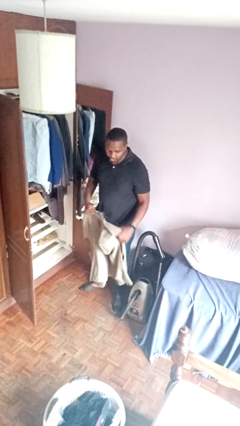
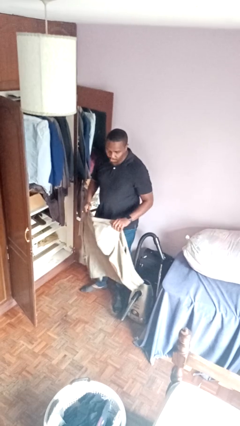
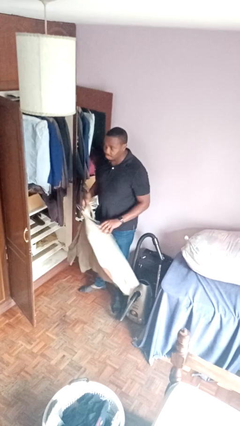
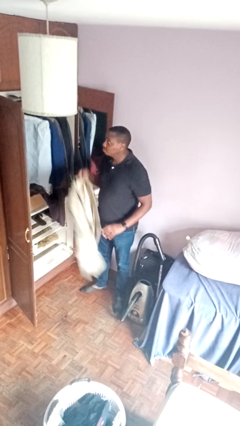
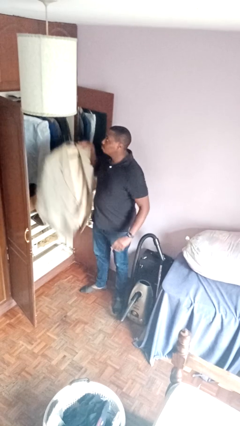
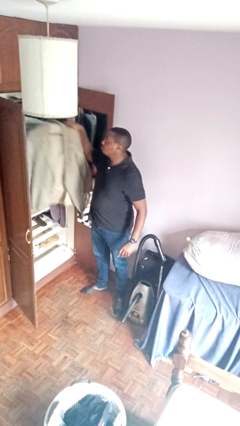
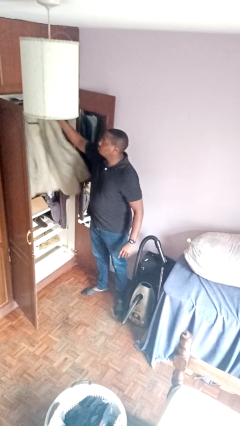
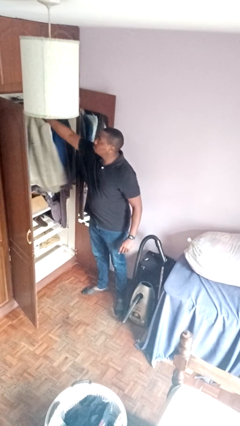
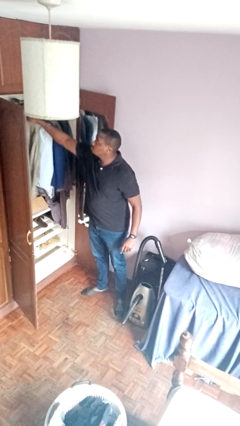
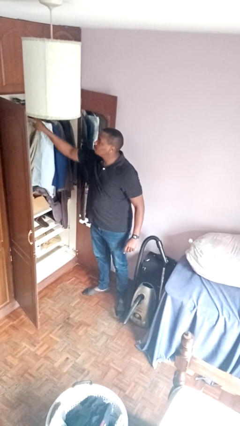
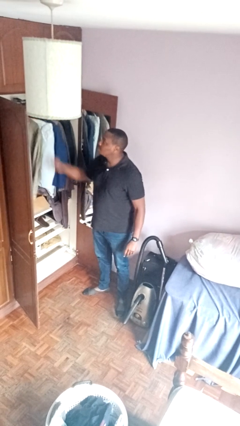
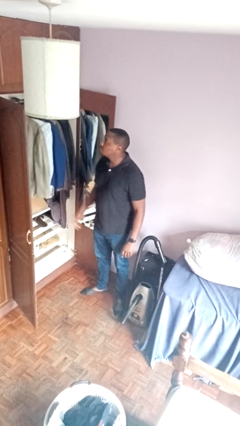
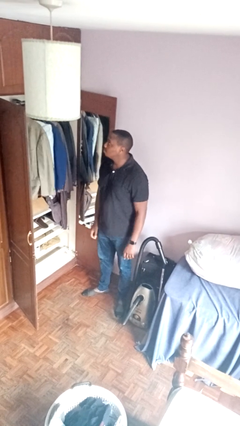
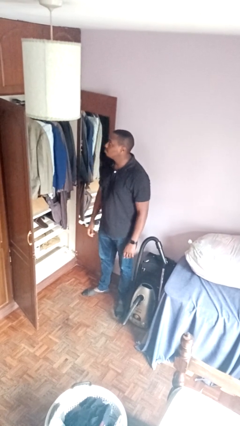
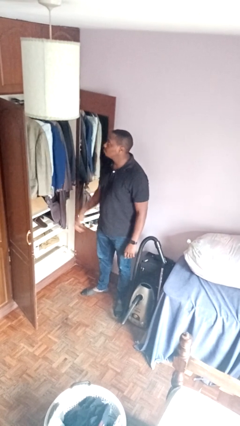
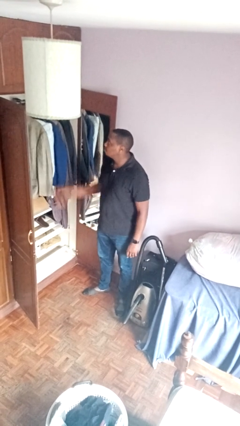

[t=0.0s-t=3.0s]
person puts clothes into closet

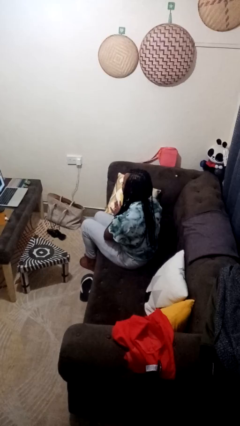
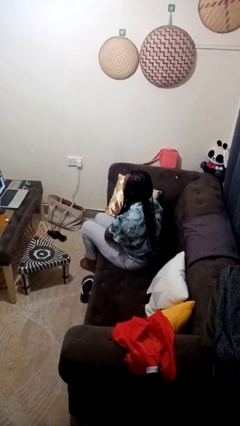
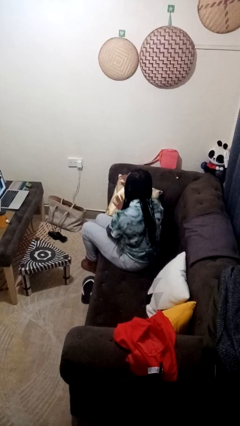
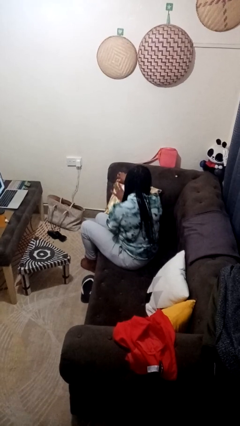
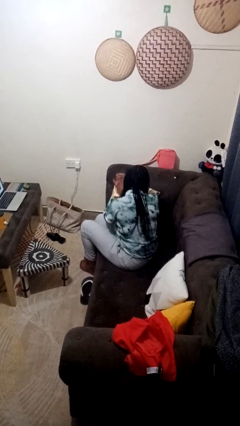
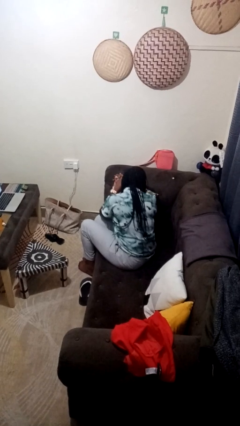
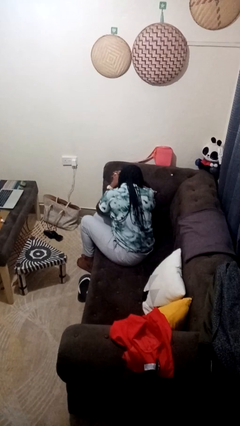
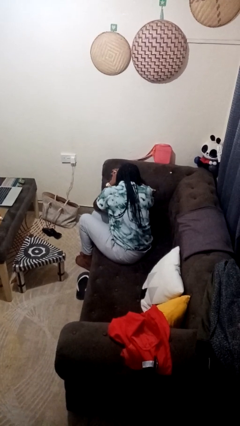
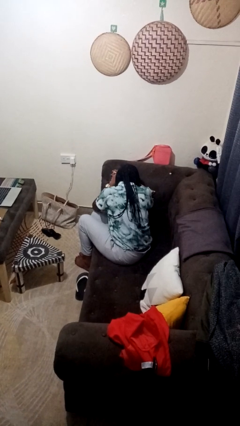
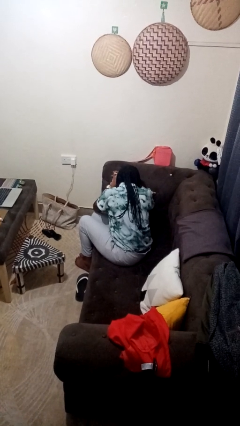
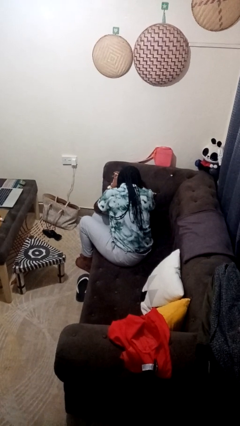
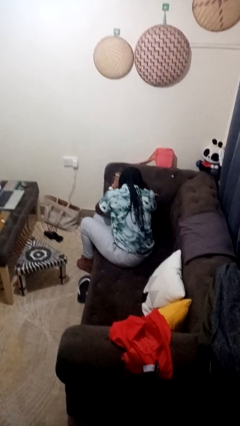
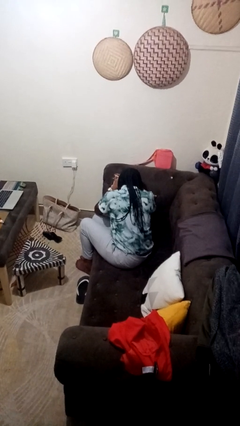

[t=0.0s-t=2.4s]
person lies down on couch

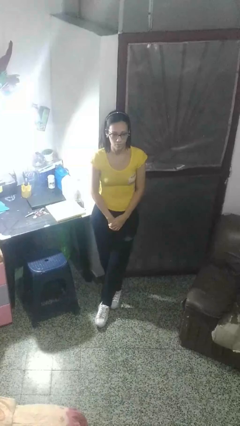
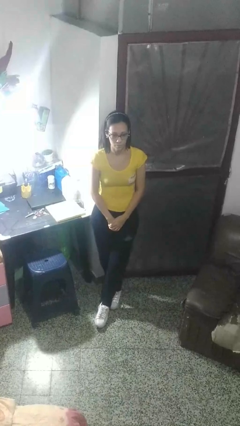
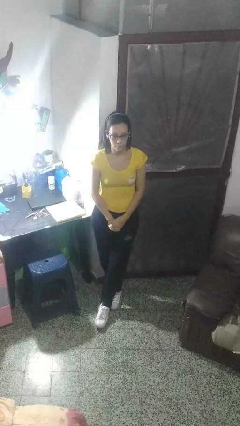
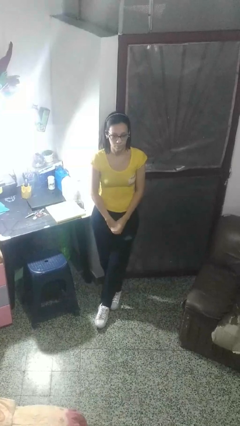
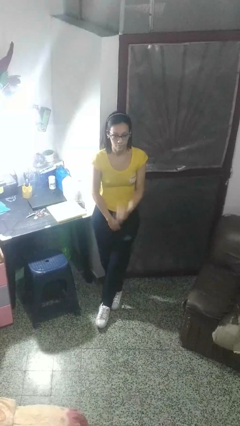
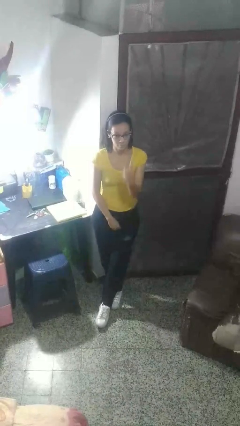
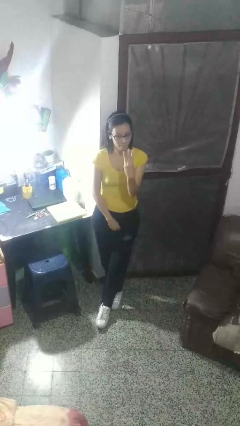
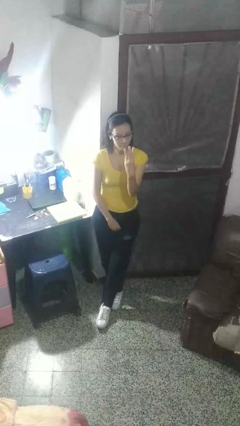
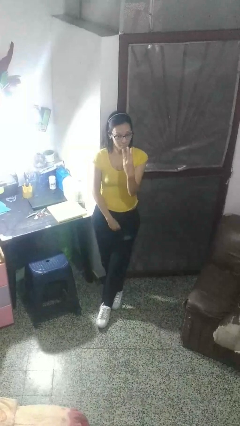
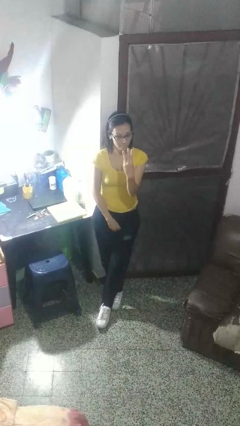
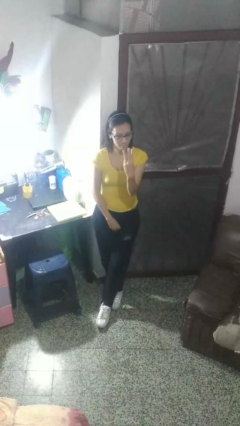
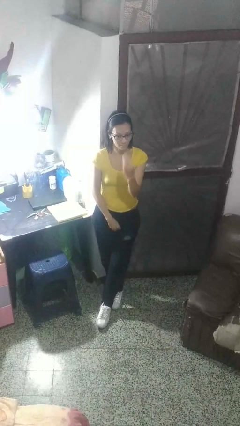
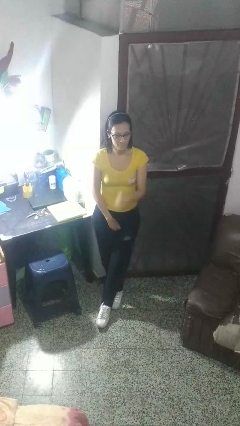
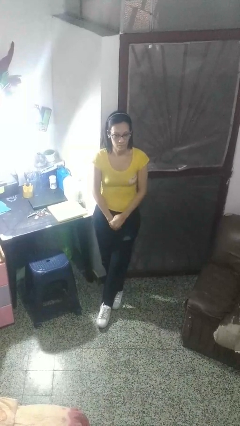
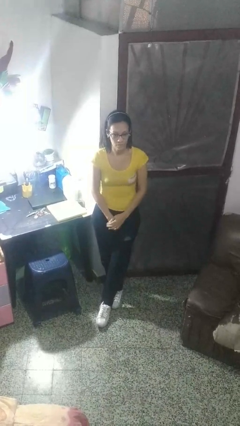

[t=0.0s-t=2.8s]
person gestures number three

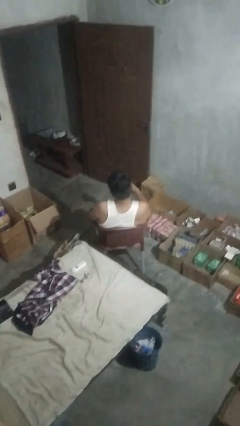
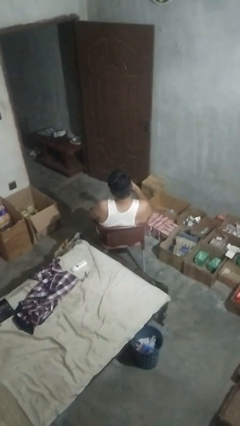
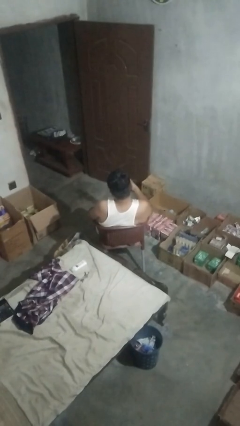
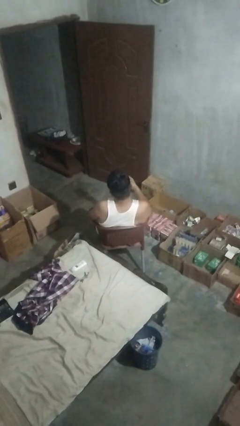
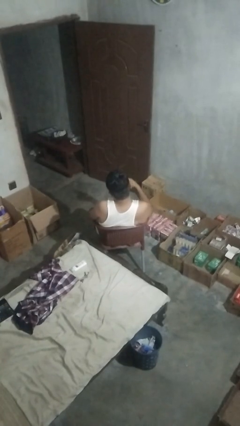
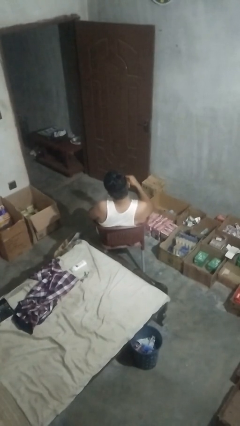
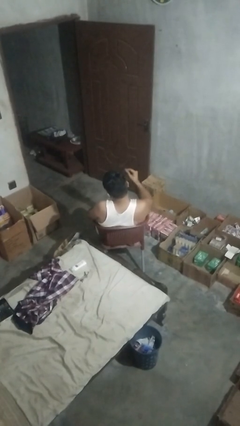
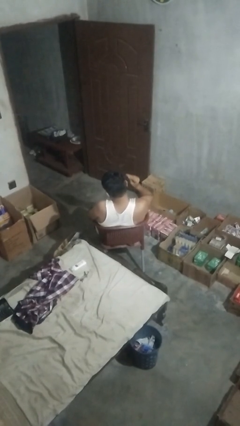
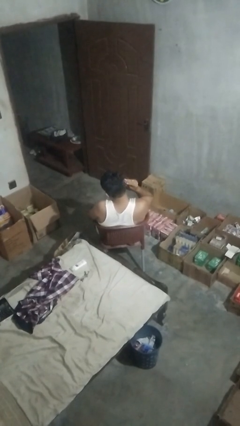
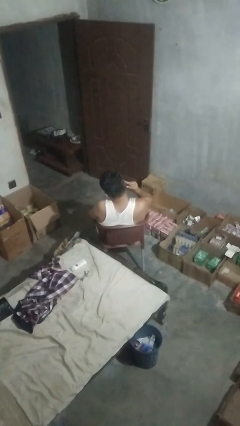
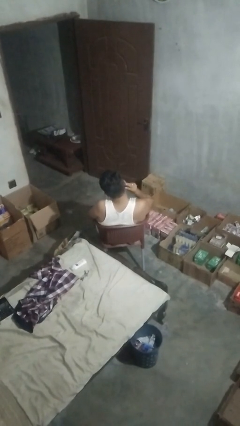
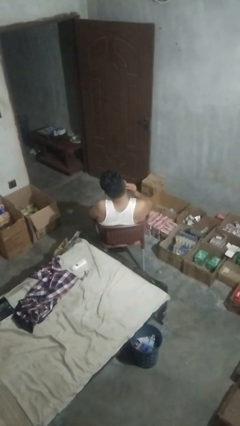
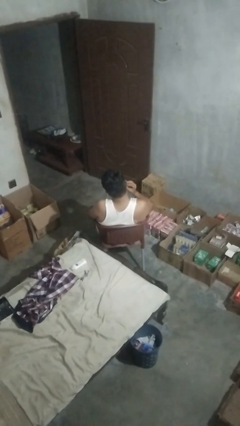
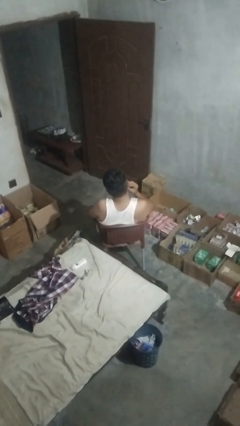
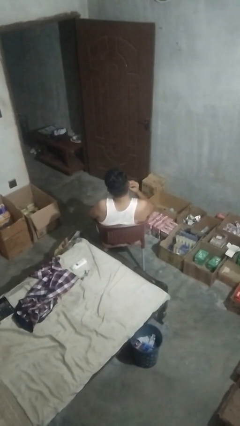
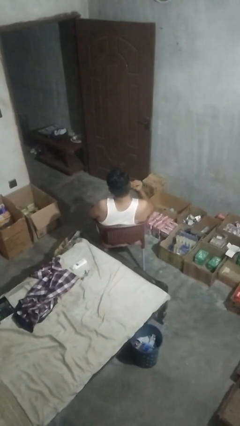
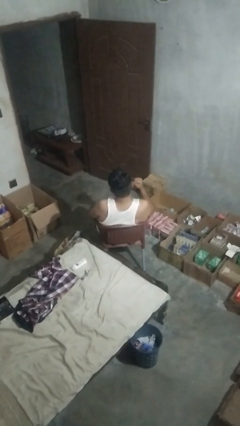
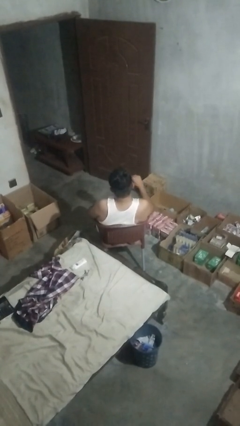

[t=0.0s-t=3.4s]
person puts on earrings

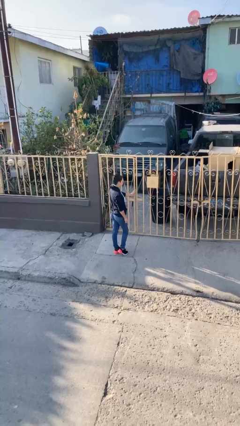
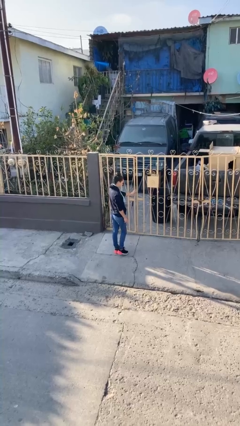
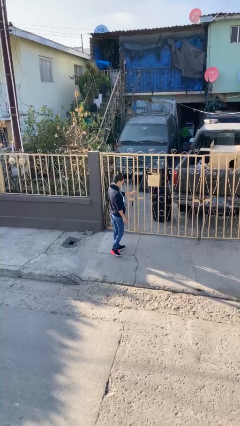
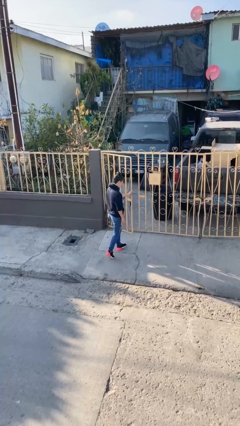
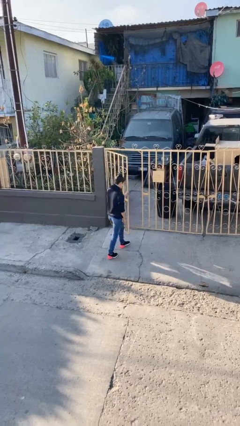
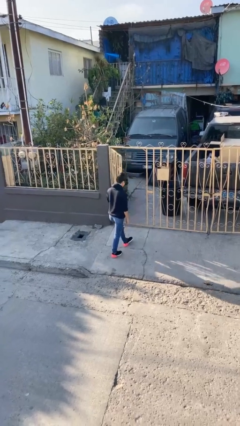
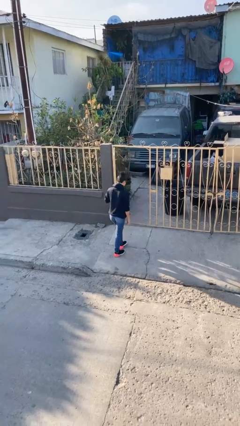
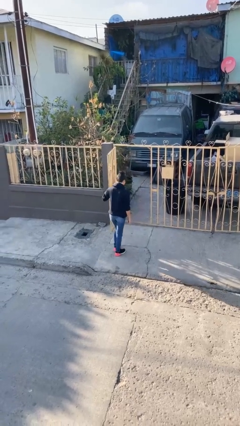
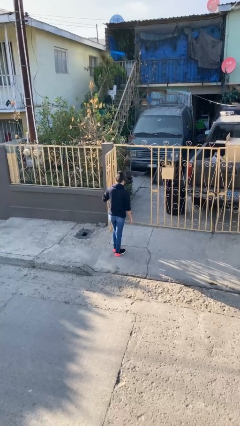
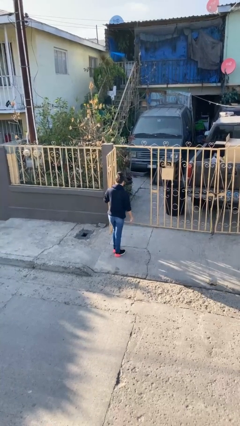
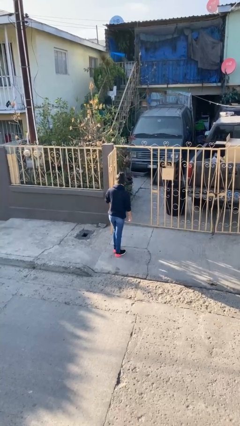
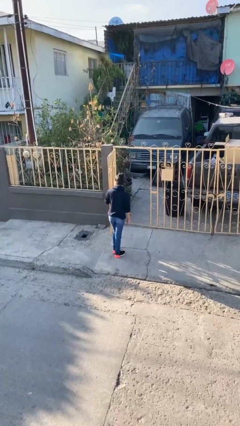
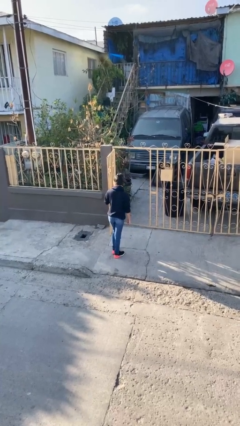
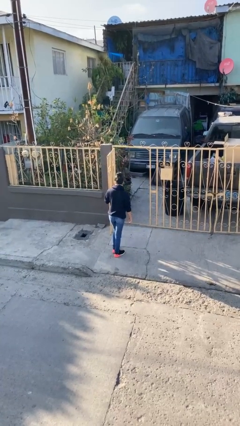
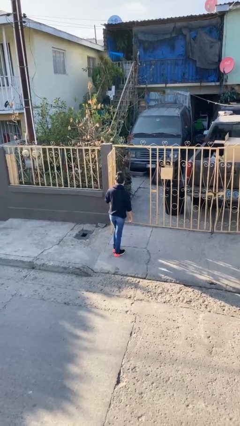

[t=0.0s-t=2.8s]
person opens facility door

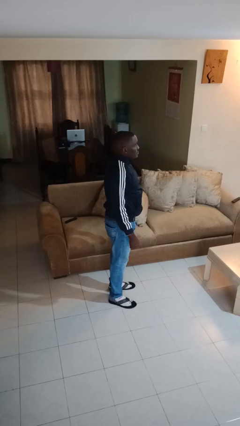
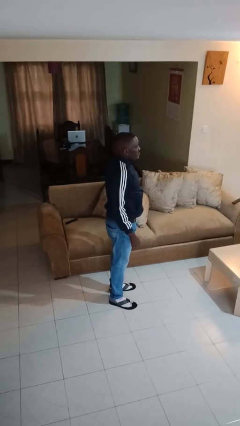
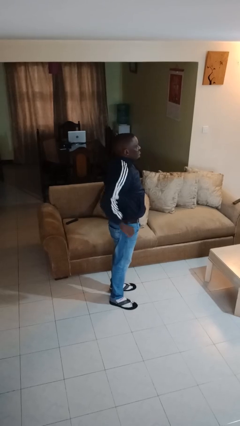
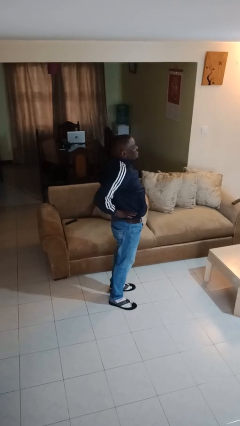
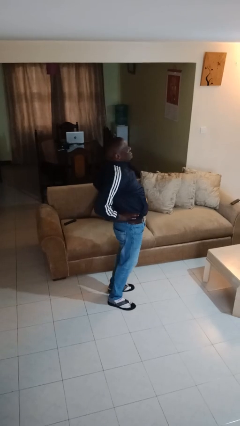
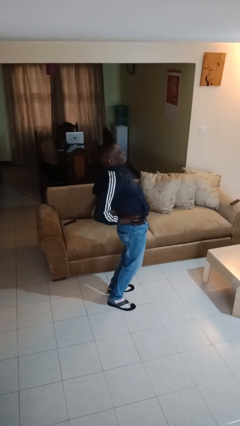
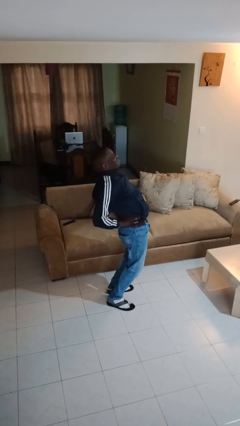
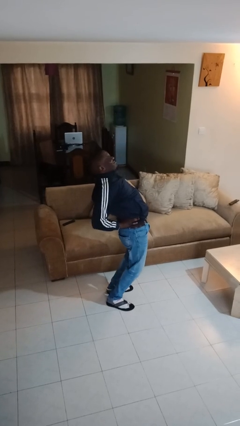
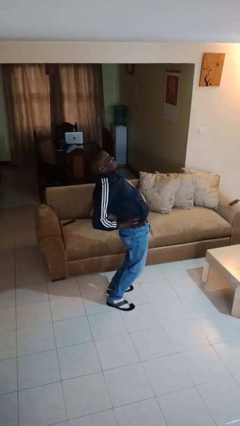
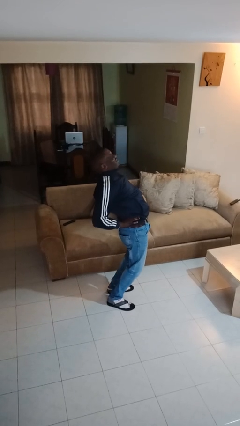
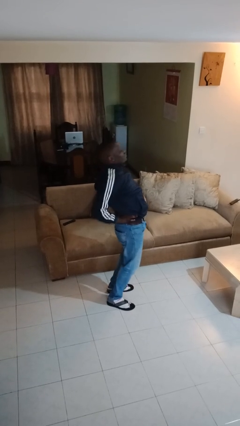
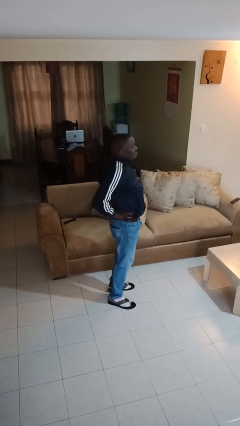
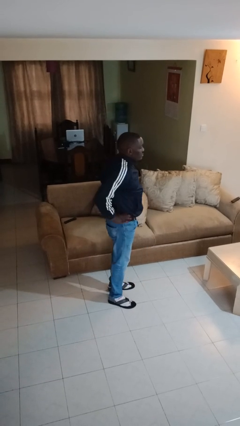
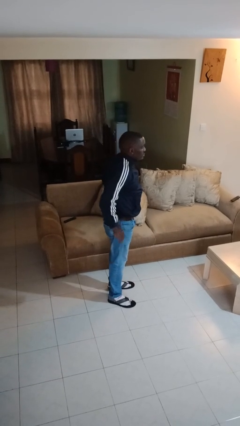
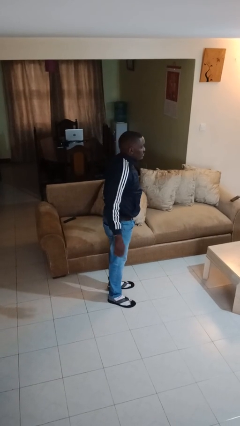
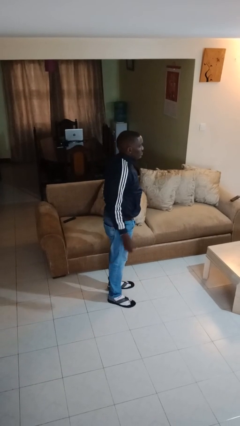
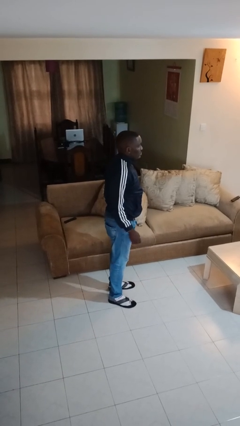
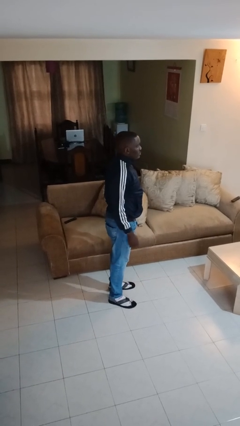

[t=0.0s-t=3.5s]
person stretches back
